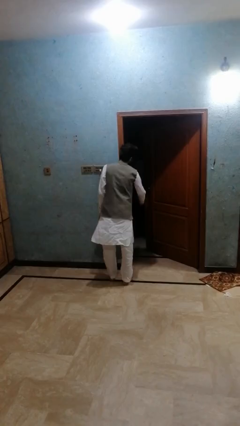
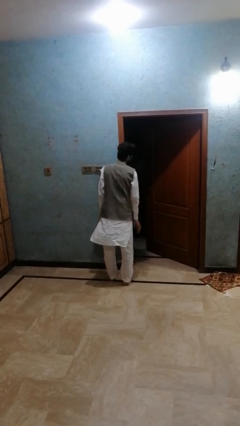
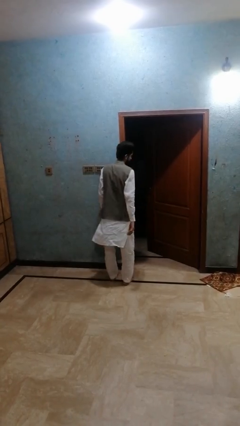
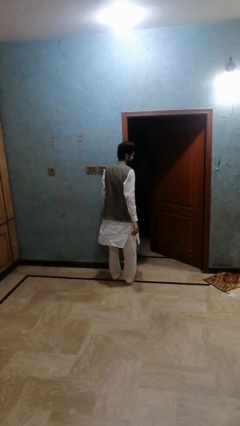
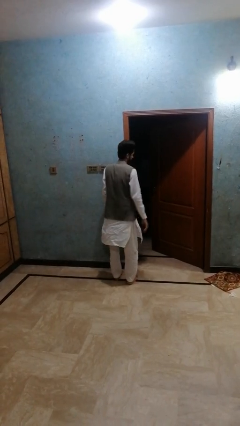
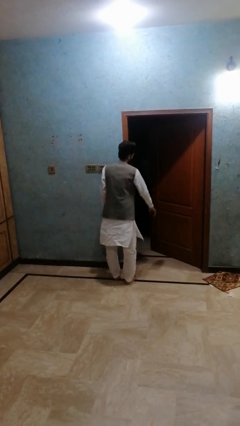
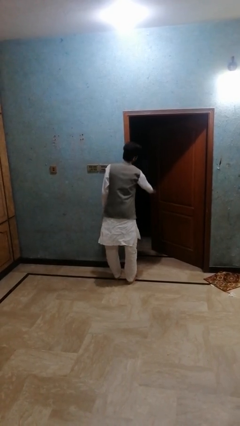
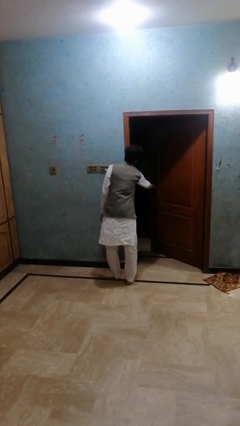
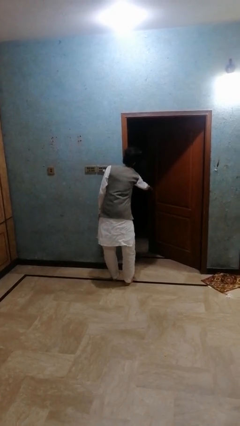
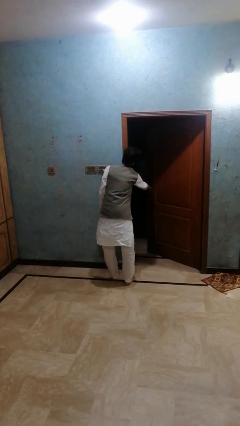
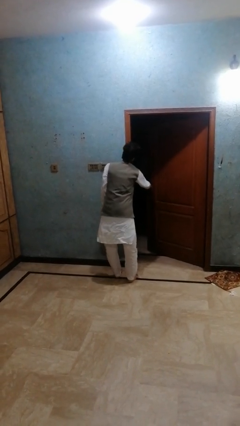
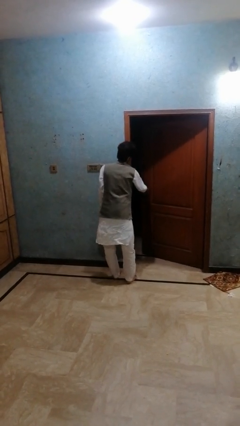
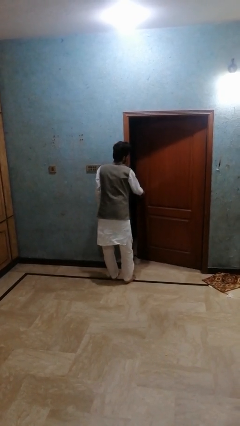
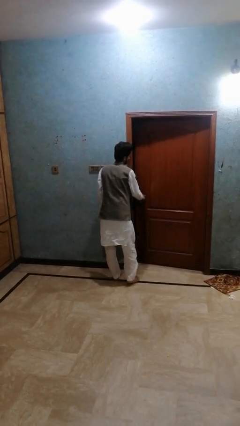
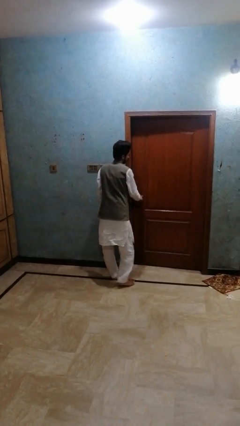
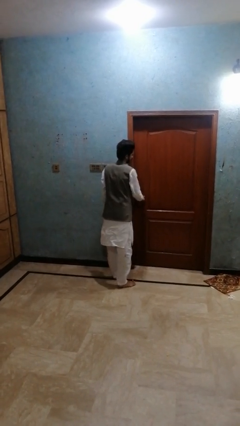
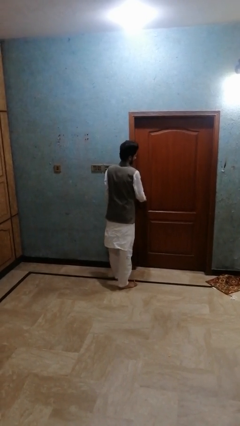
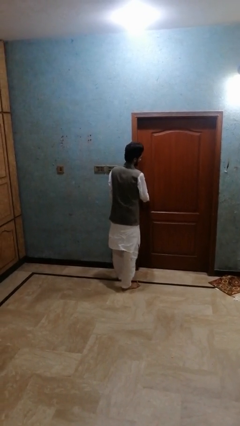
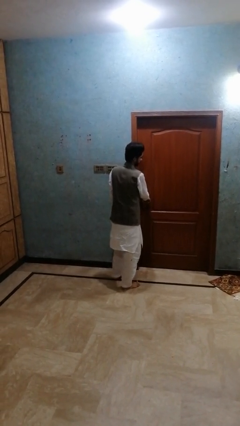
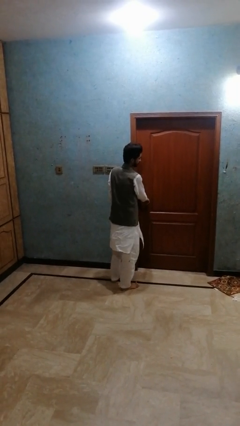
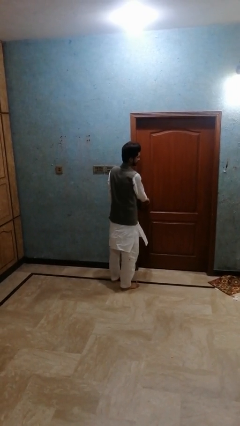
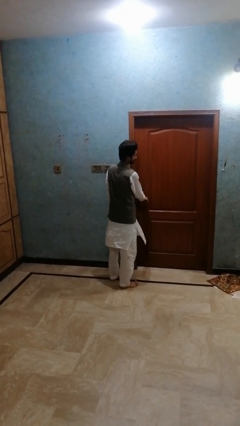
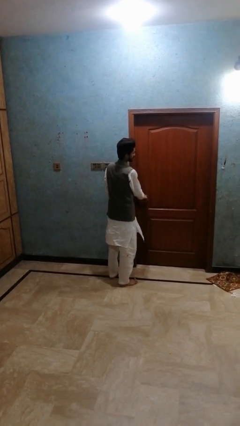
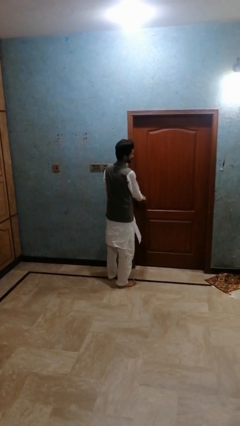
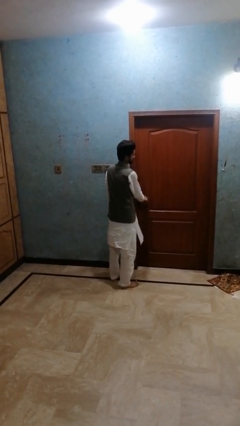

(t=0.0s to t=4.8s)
person closes closet door

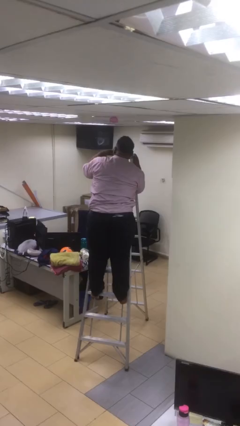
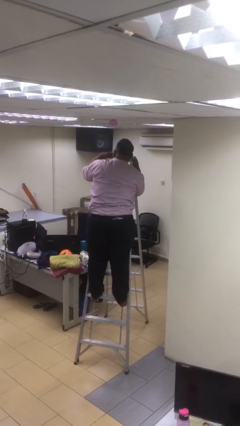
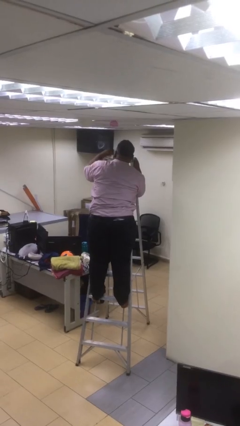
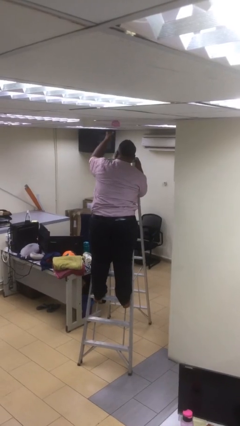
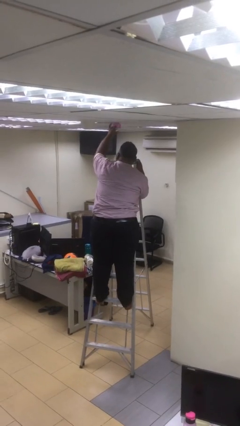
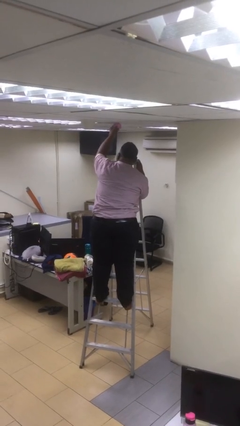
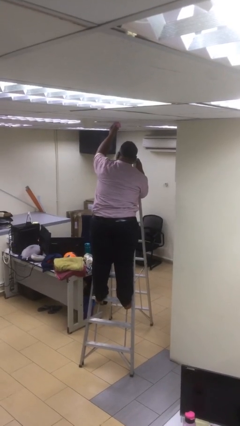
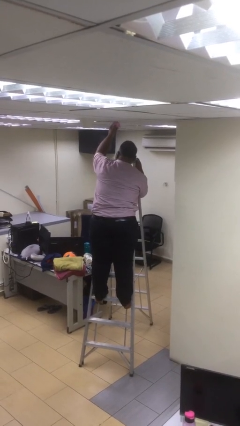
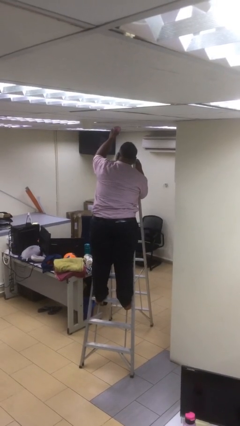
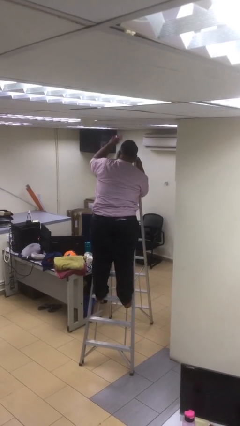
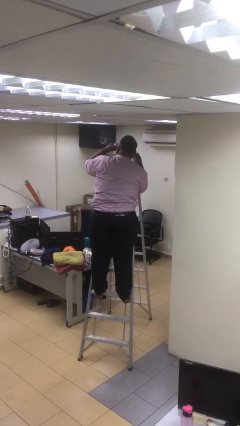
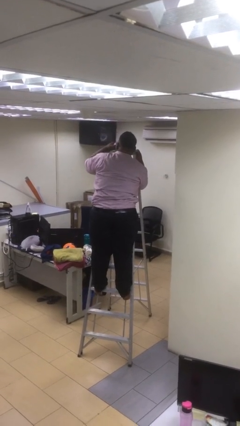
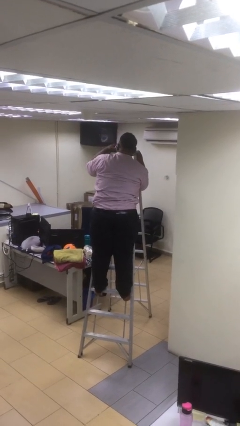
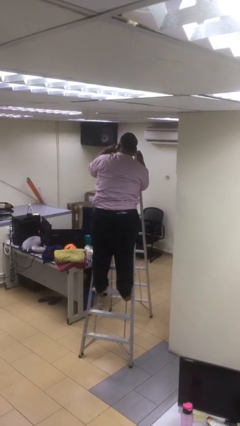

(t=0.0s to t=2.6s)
person takes down smoke detector

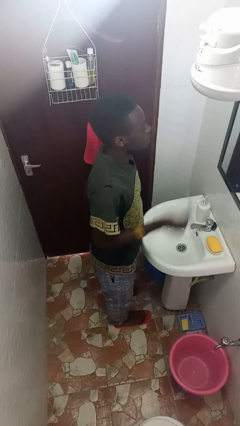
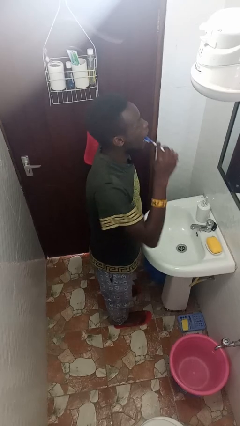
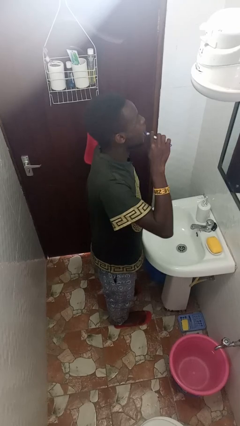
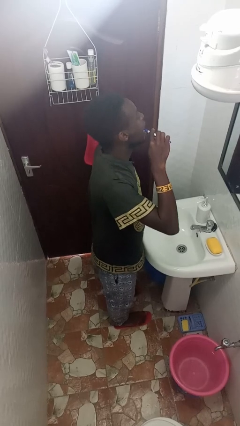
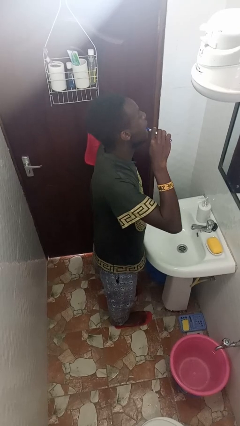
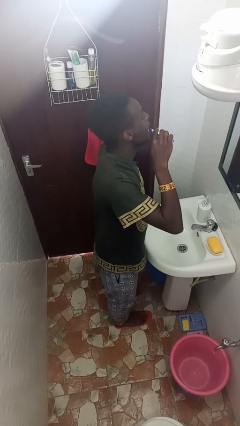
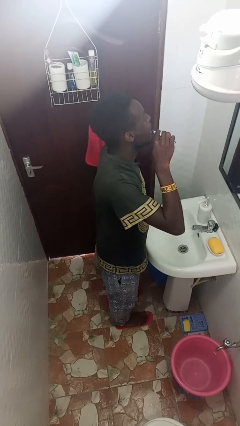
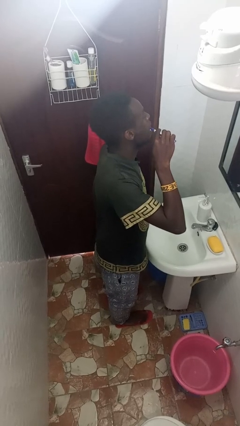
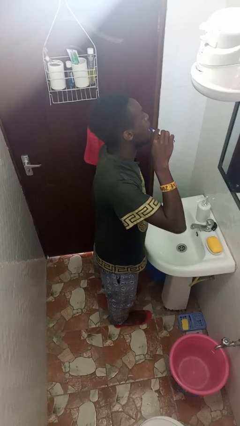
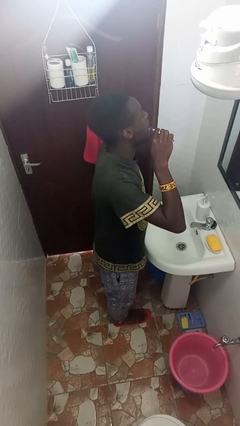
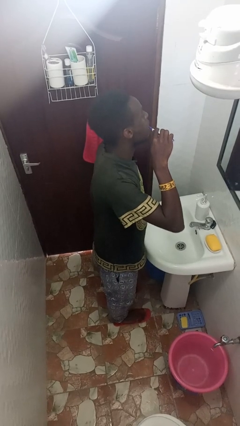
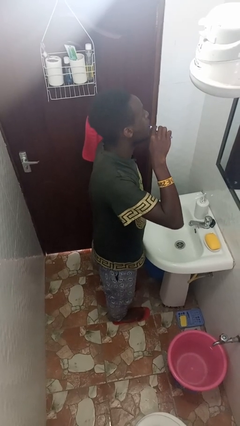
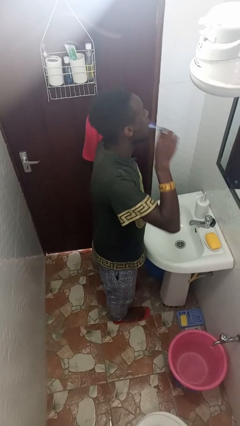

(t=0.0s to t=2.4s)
person brushes teeth

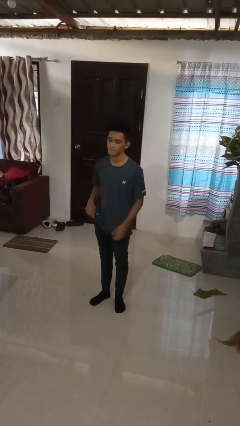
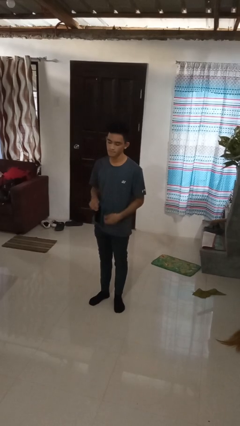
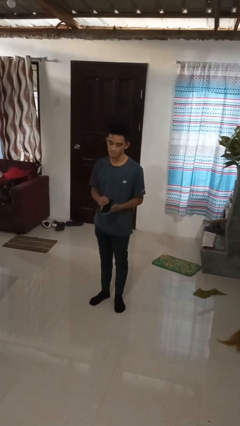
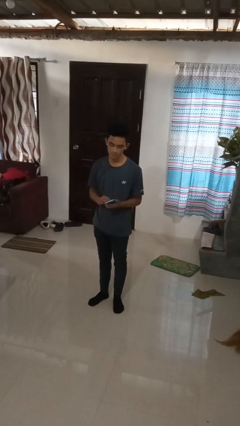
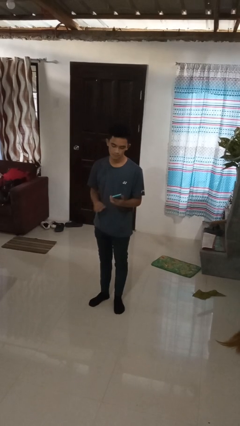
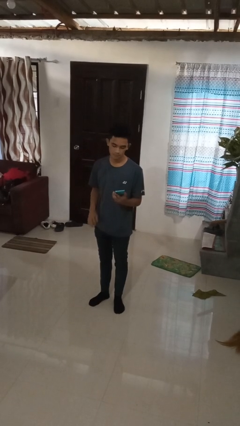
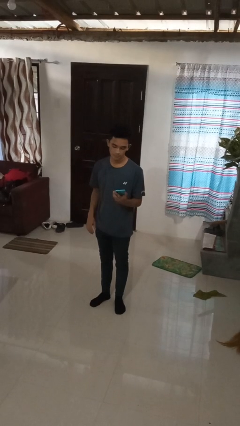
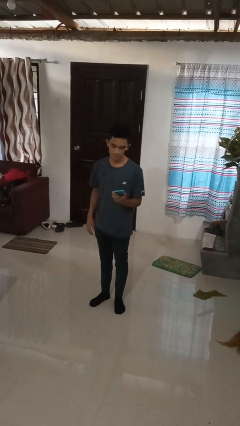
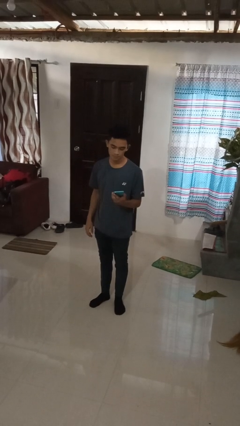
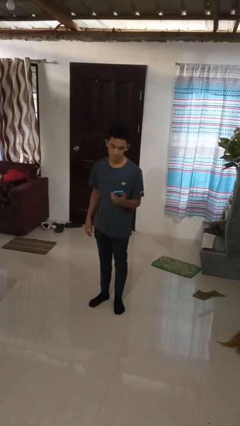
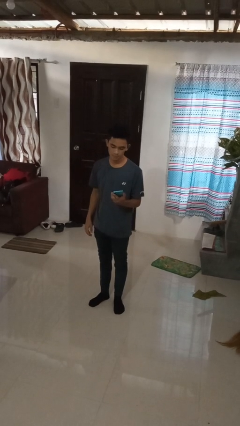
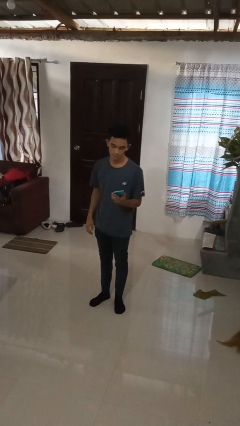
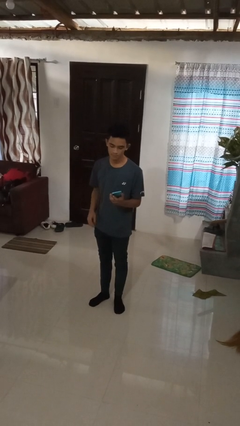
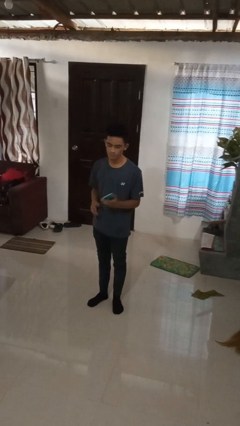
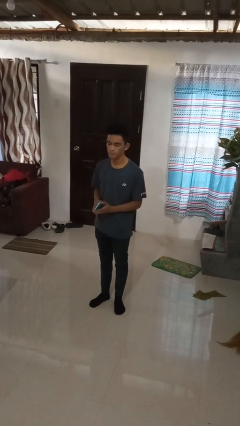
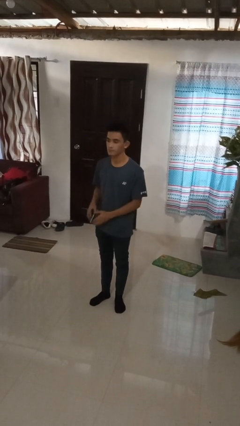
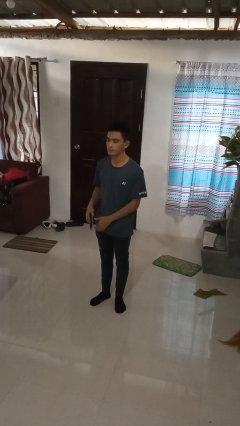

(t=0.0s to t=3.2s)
person takes phone from pocket

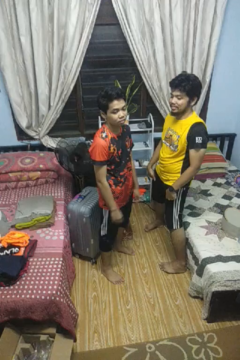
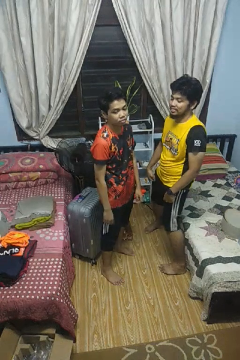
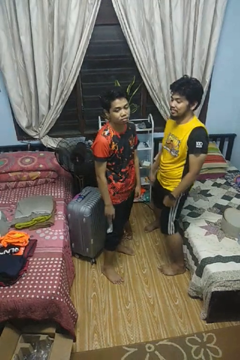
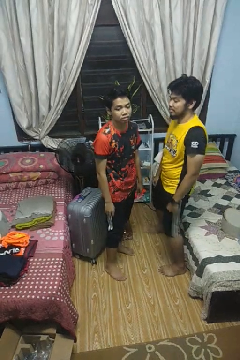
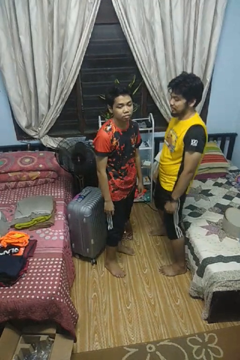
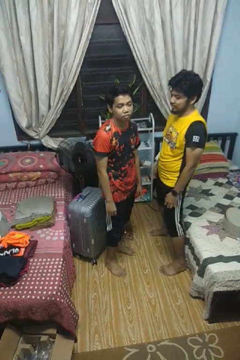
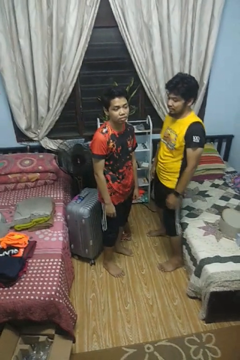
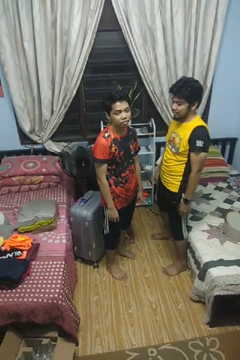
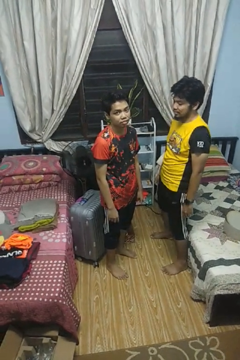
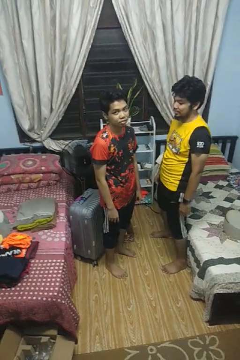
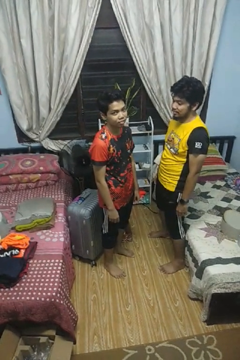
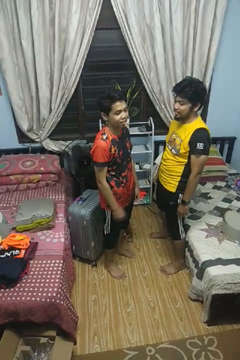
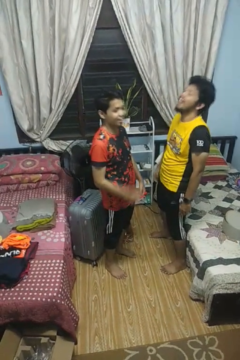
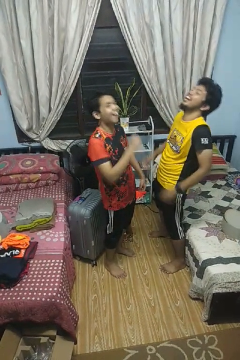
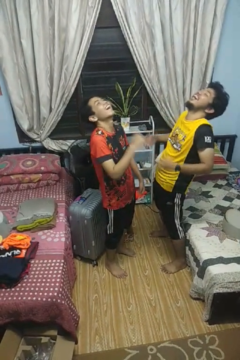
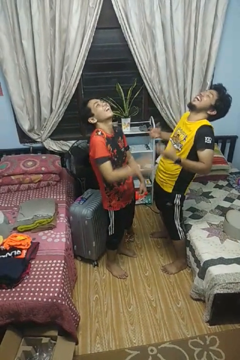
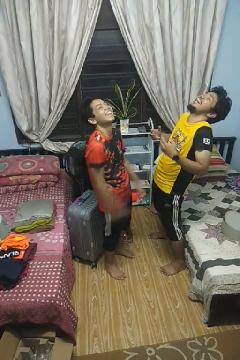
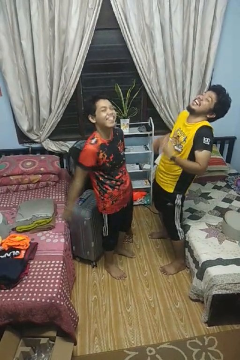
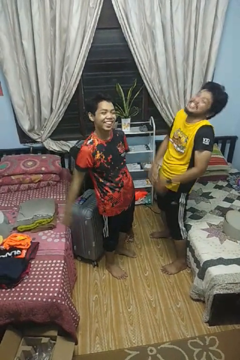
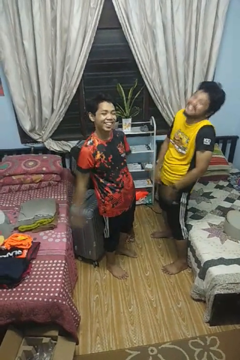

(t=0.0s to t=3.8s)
person laughs with person

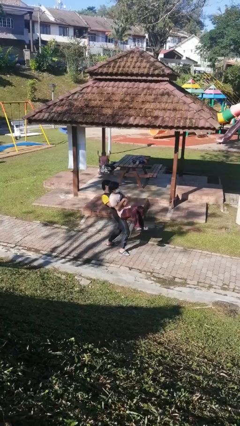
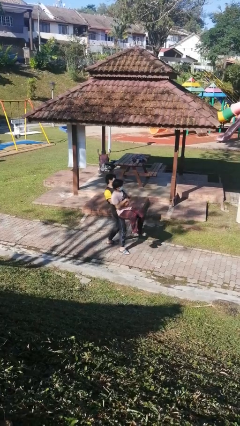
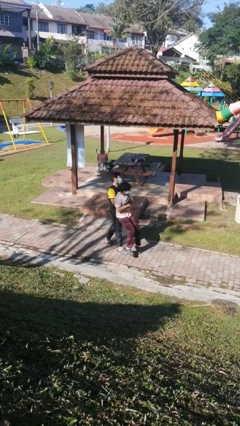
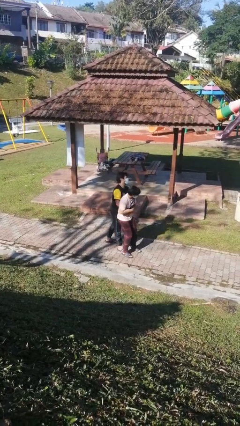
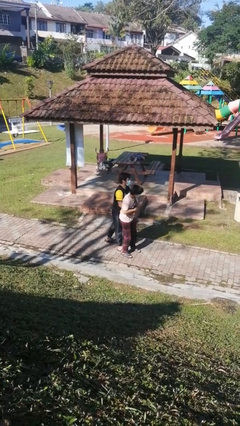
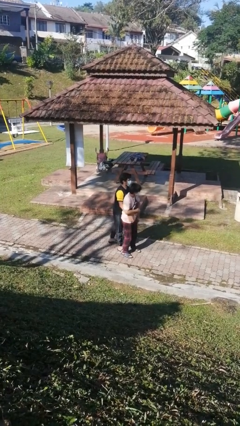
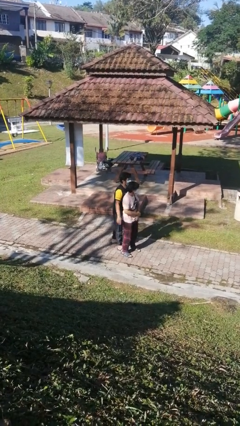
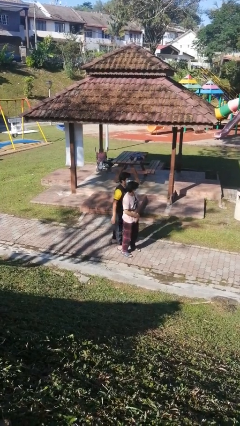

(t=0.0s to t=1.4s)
person puts down person

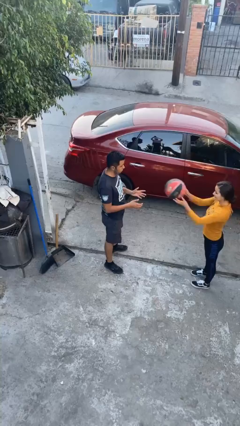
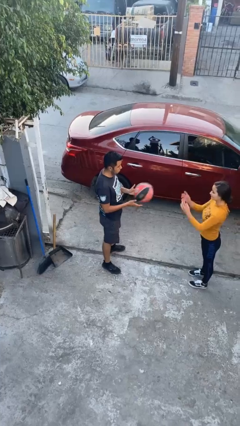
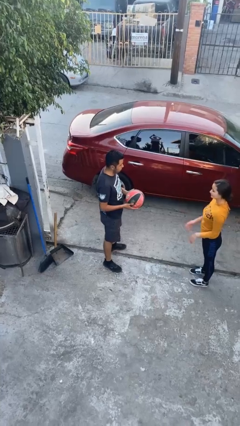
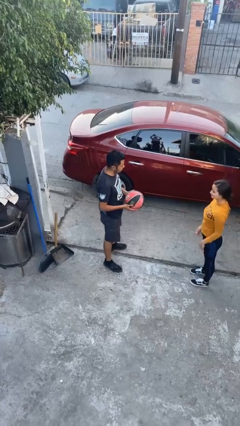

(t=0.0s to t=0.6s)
person catches object from person
